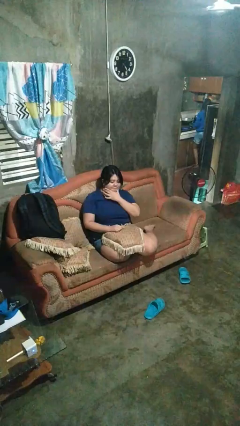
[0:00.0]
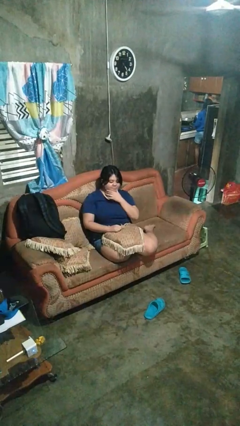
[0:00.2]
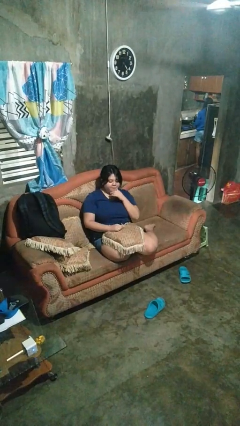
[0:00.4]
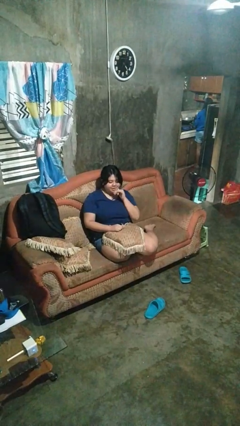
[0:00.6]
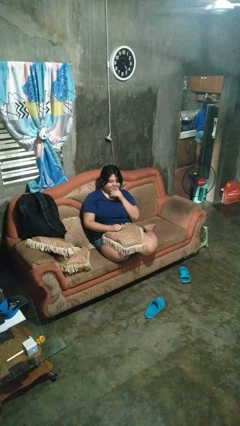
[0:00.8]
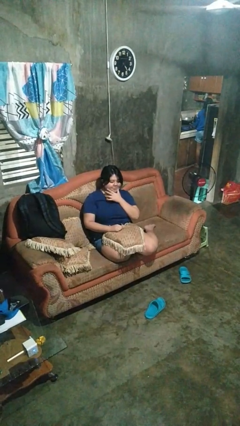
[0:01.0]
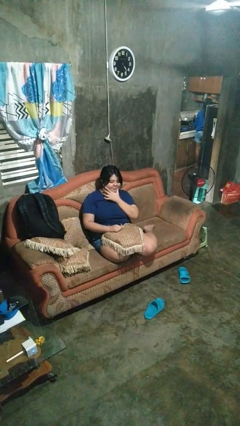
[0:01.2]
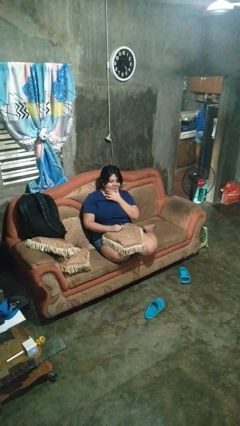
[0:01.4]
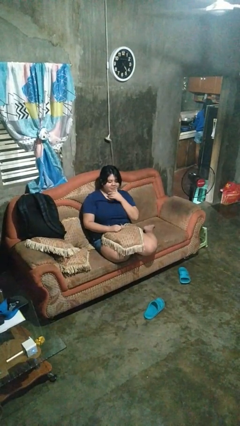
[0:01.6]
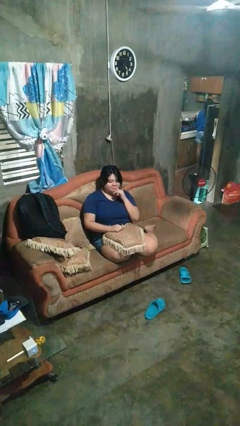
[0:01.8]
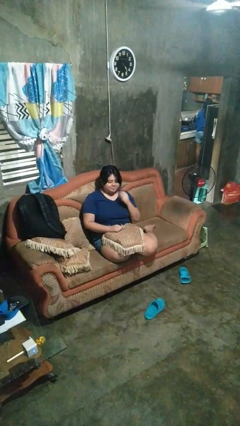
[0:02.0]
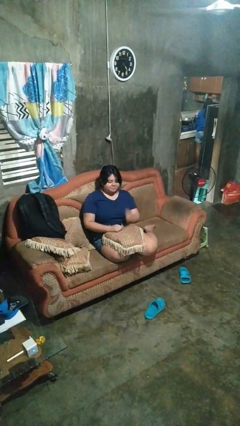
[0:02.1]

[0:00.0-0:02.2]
person strokes chin

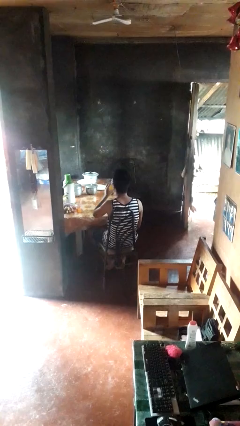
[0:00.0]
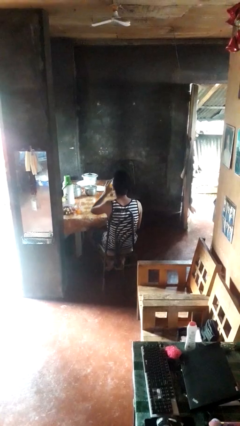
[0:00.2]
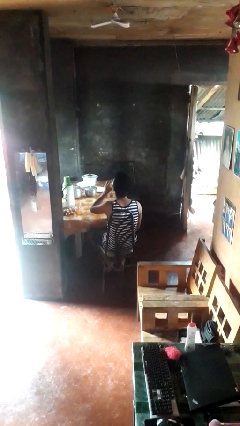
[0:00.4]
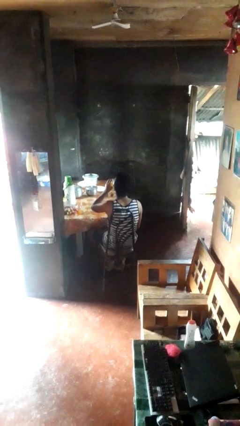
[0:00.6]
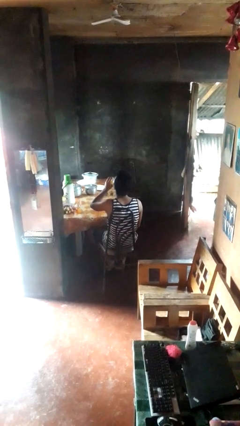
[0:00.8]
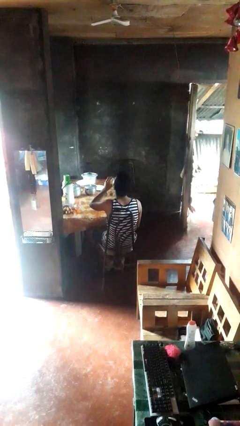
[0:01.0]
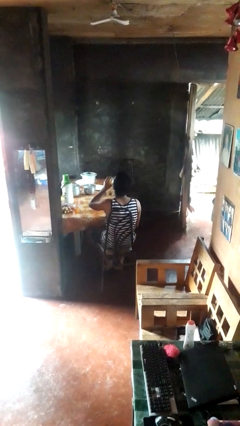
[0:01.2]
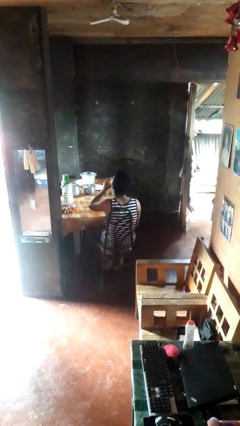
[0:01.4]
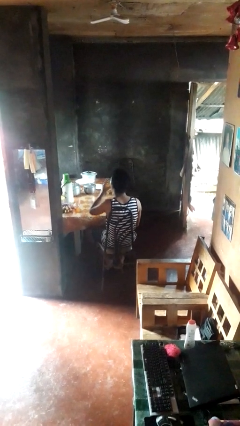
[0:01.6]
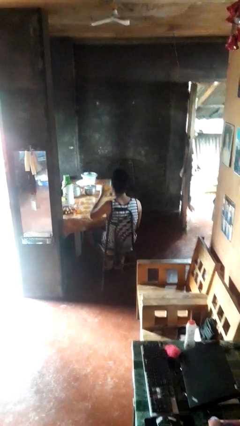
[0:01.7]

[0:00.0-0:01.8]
person drinks from shotglass

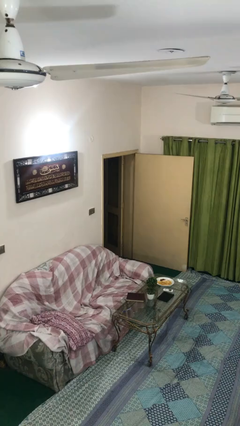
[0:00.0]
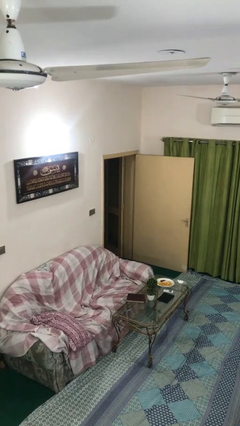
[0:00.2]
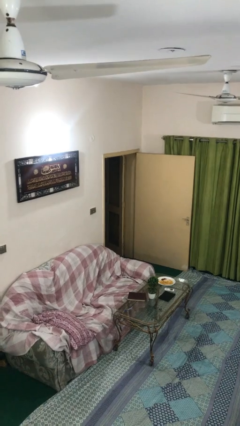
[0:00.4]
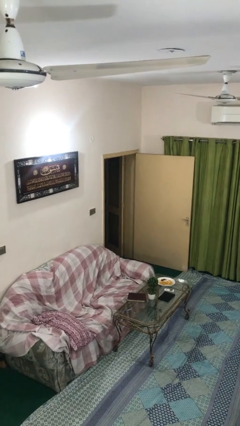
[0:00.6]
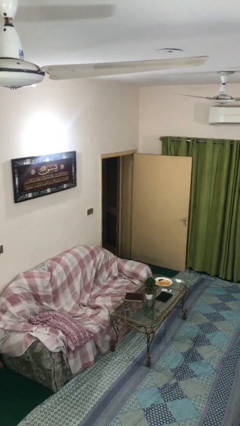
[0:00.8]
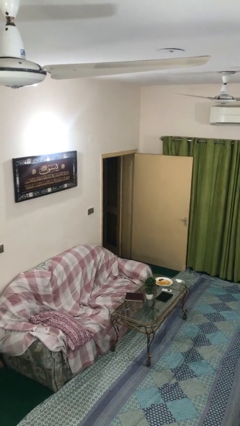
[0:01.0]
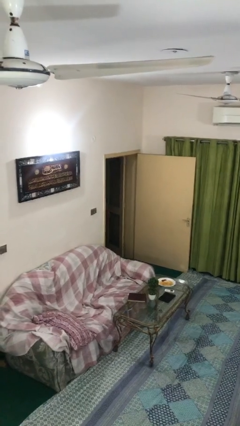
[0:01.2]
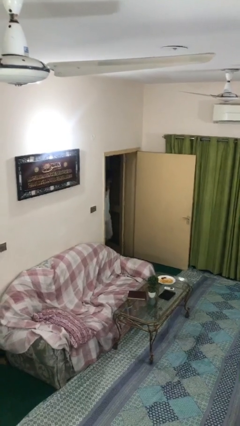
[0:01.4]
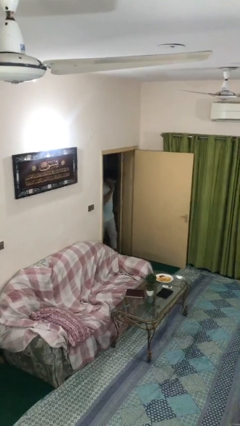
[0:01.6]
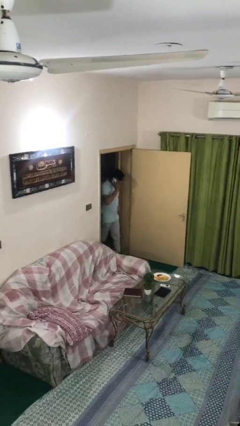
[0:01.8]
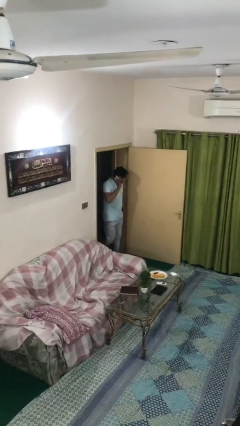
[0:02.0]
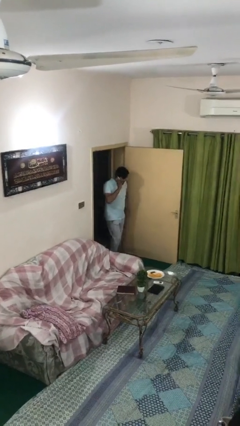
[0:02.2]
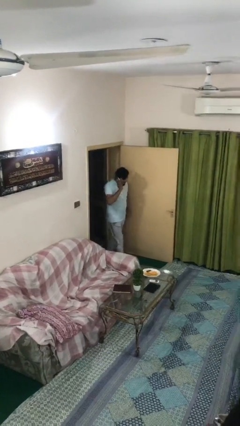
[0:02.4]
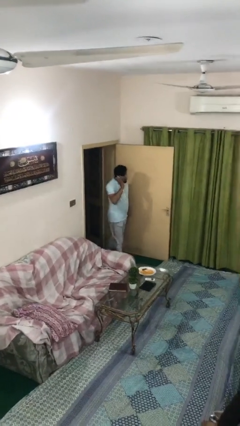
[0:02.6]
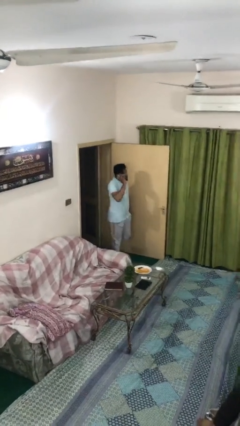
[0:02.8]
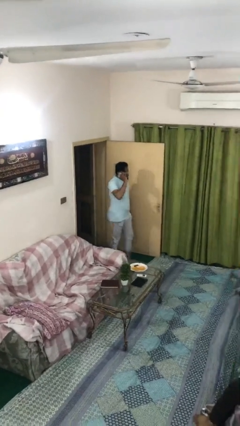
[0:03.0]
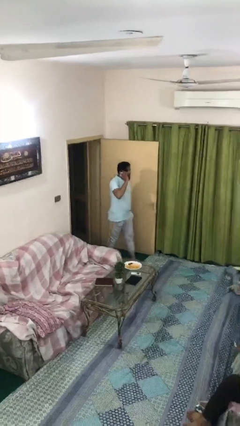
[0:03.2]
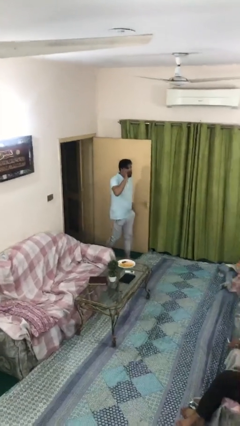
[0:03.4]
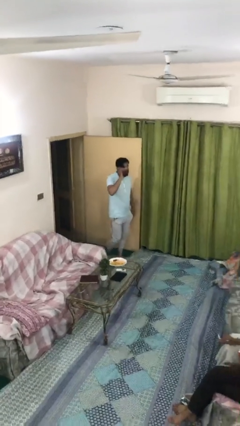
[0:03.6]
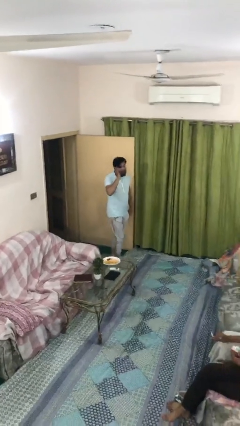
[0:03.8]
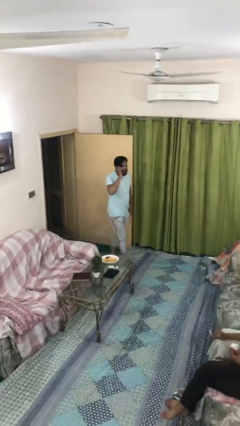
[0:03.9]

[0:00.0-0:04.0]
person enters scene through structure

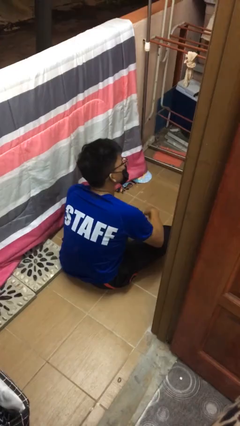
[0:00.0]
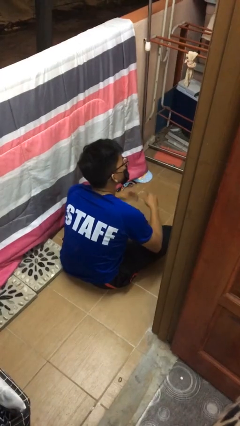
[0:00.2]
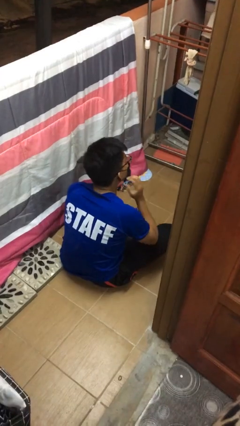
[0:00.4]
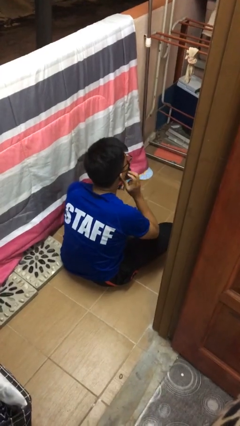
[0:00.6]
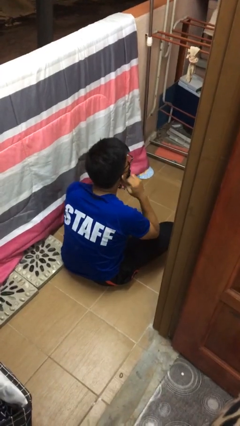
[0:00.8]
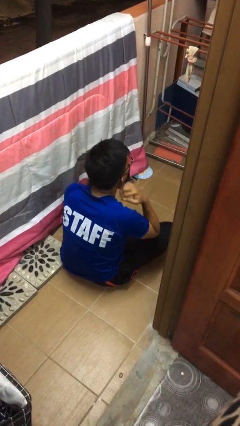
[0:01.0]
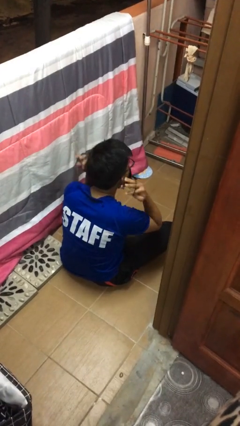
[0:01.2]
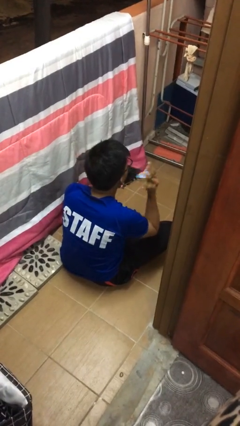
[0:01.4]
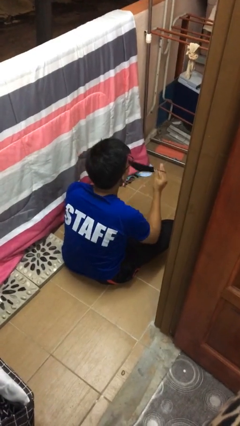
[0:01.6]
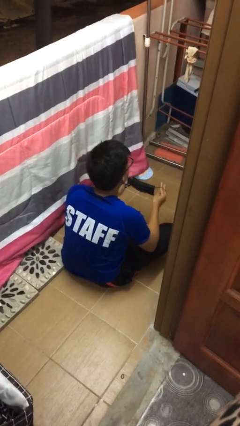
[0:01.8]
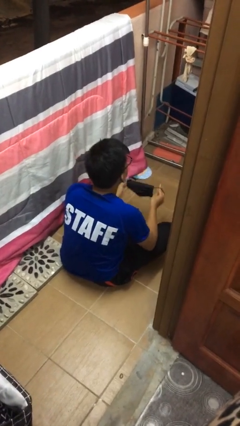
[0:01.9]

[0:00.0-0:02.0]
person takes off facemask

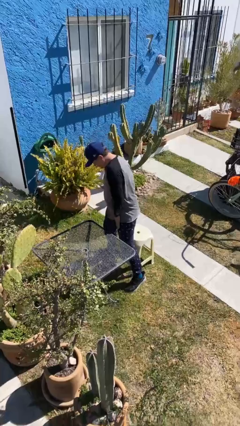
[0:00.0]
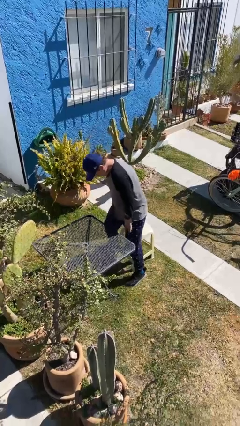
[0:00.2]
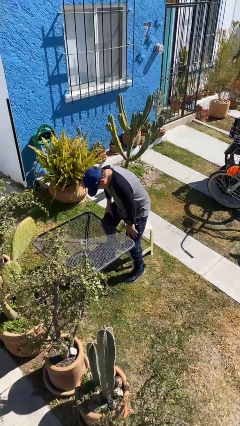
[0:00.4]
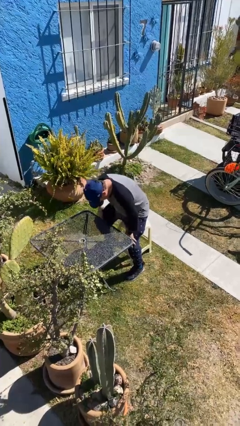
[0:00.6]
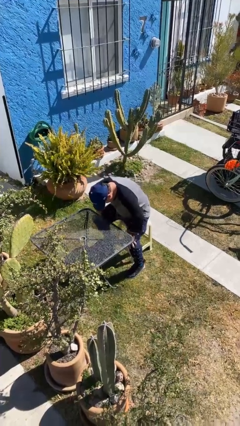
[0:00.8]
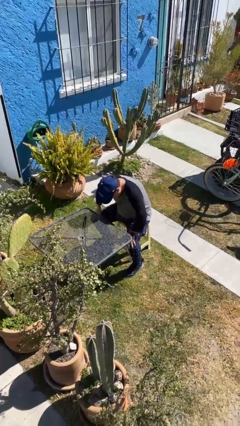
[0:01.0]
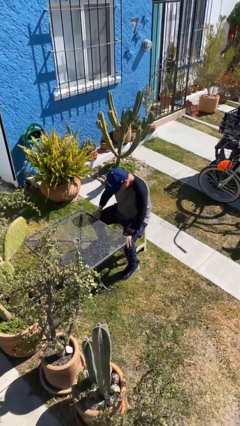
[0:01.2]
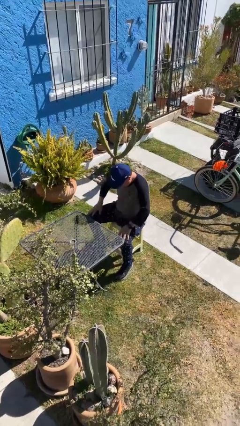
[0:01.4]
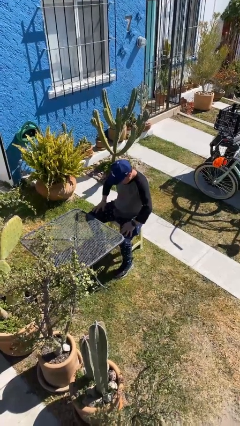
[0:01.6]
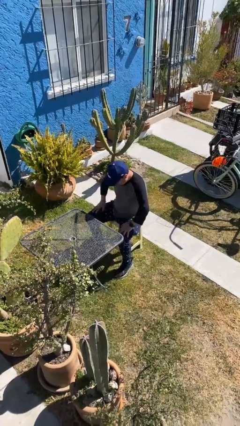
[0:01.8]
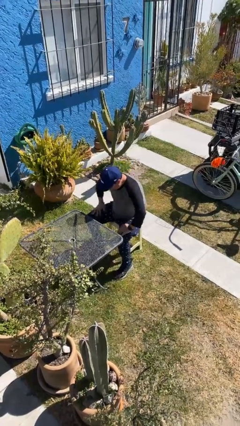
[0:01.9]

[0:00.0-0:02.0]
person sits down

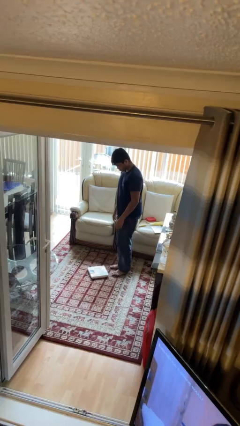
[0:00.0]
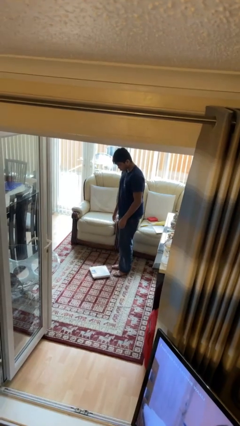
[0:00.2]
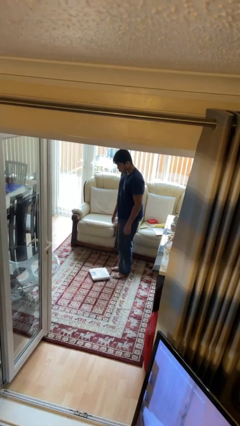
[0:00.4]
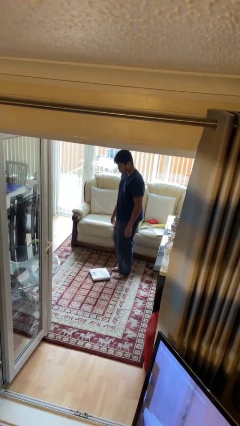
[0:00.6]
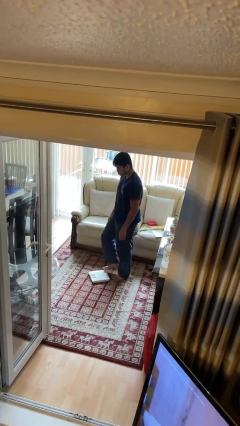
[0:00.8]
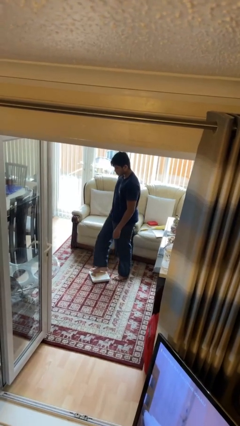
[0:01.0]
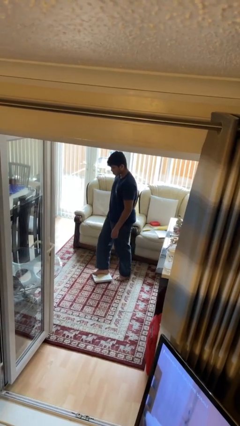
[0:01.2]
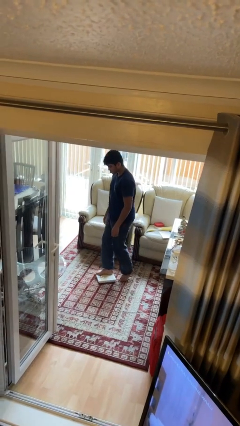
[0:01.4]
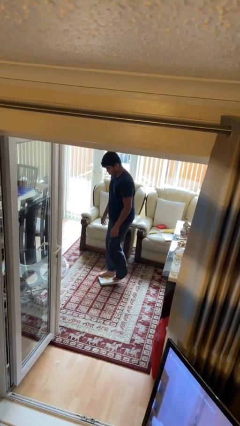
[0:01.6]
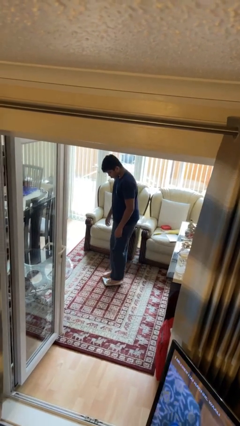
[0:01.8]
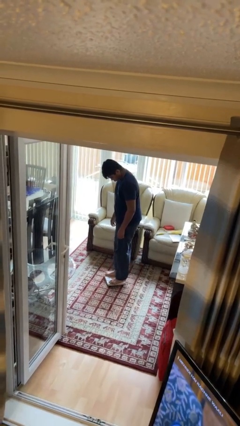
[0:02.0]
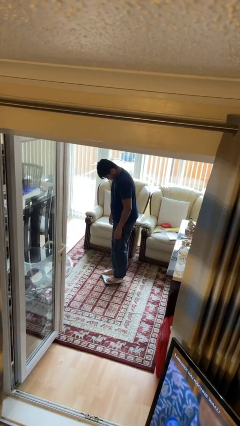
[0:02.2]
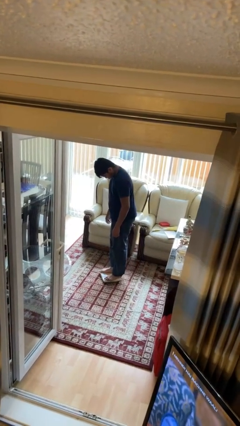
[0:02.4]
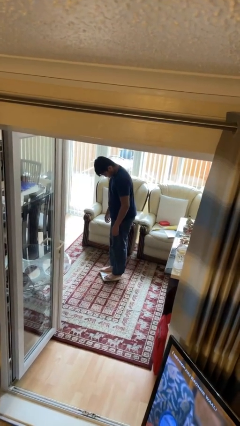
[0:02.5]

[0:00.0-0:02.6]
person uses bodyweight scale

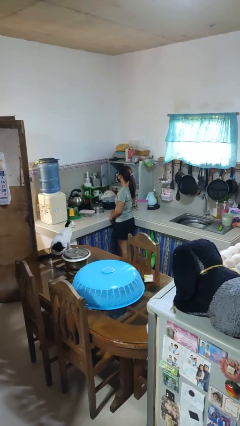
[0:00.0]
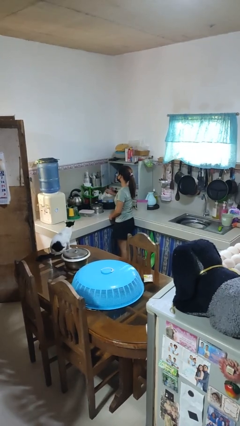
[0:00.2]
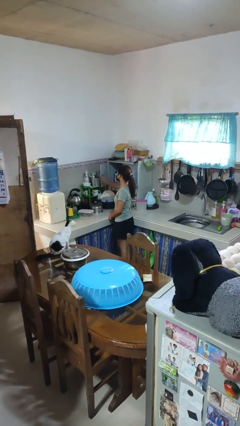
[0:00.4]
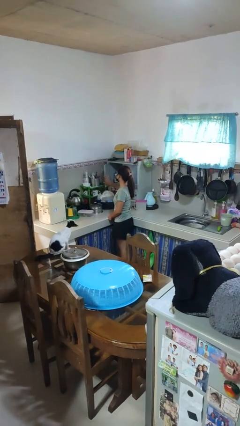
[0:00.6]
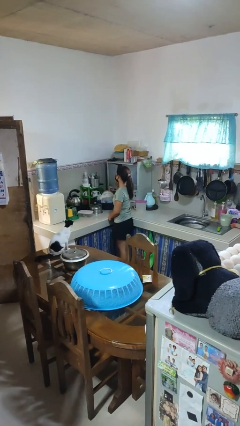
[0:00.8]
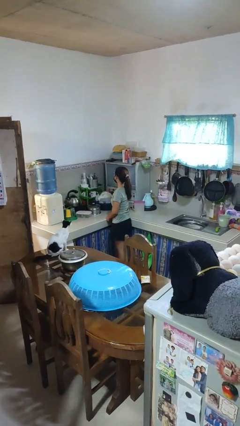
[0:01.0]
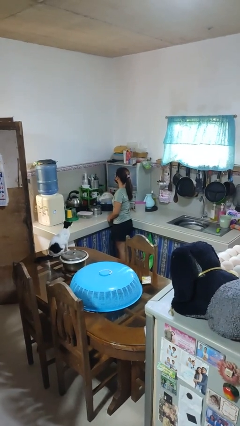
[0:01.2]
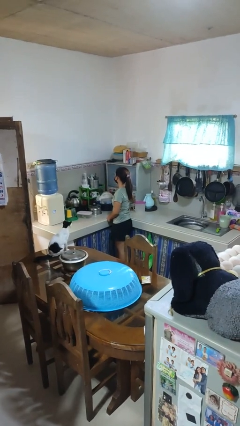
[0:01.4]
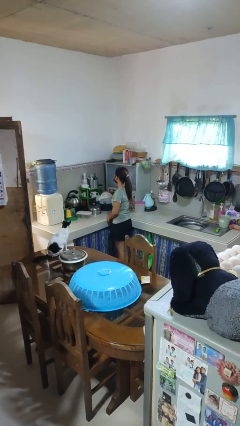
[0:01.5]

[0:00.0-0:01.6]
person closes kitchen drawer

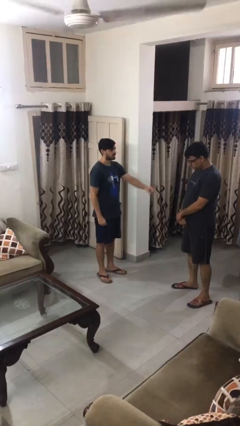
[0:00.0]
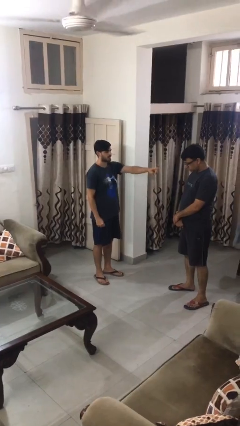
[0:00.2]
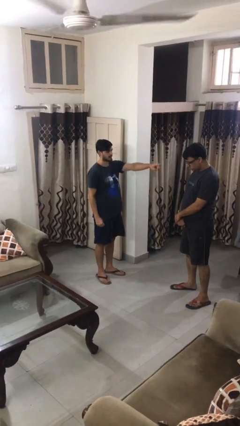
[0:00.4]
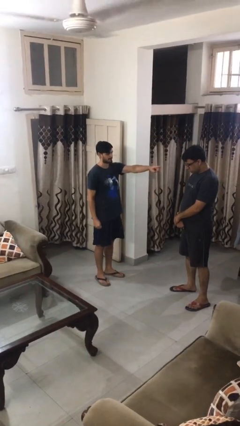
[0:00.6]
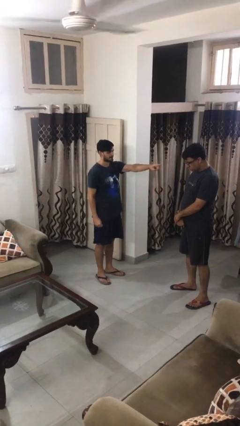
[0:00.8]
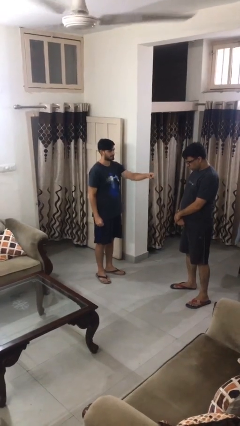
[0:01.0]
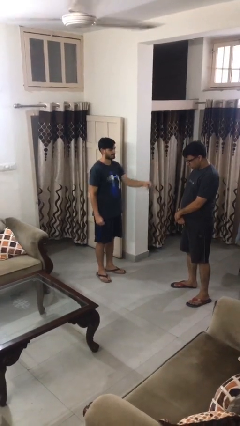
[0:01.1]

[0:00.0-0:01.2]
person points at person
